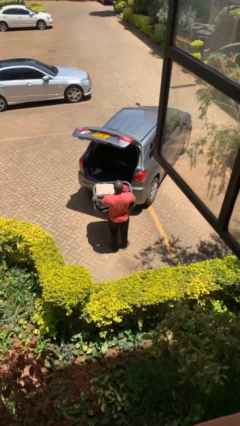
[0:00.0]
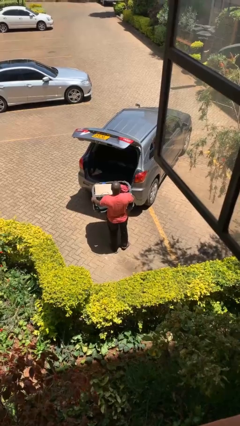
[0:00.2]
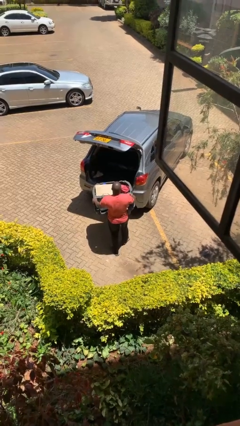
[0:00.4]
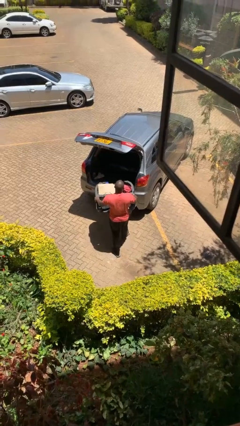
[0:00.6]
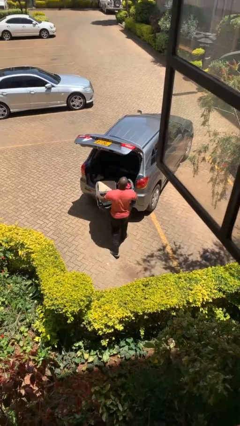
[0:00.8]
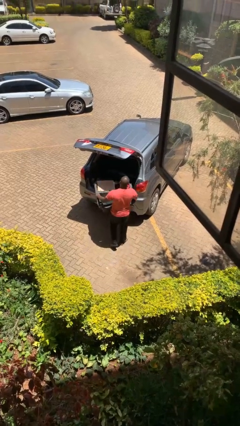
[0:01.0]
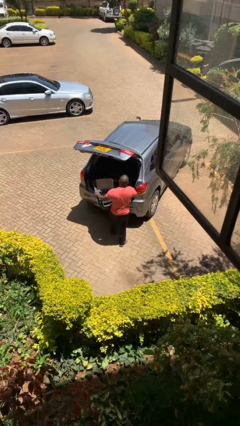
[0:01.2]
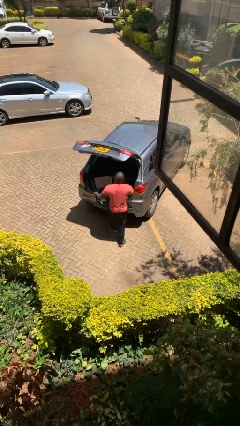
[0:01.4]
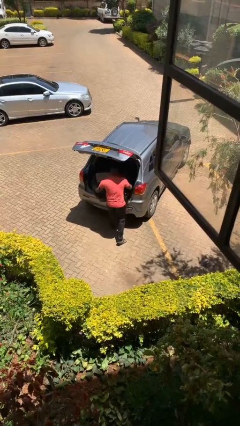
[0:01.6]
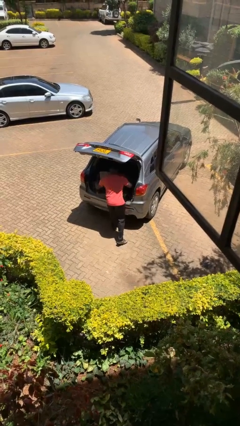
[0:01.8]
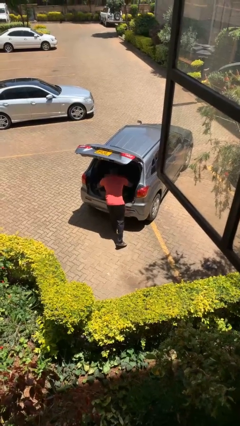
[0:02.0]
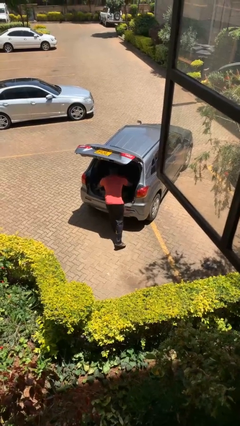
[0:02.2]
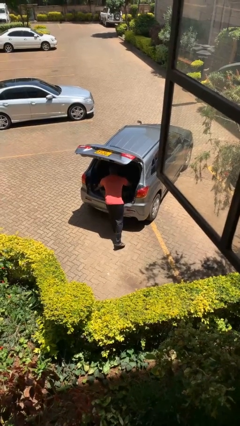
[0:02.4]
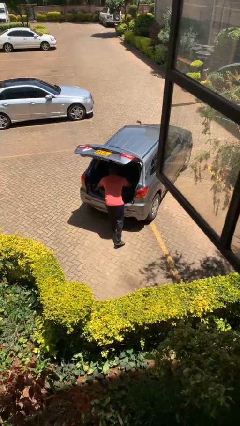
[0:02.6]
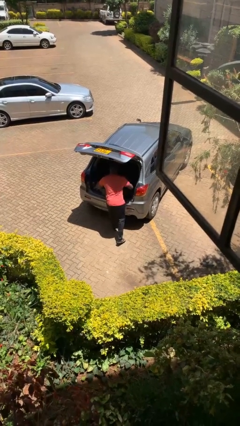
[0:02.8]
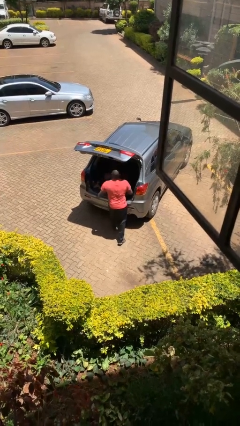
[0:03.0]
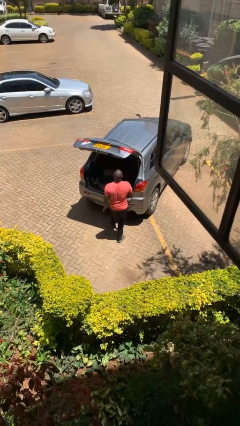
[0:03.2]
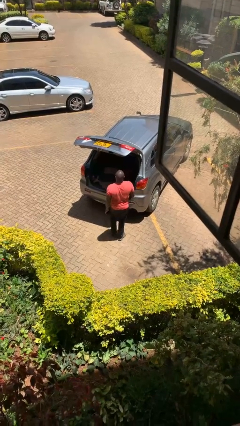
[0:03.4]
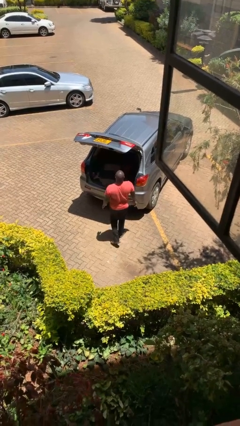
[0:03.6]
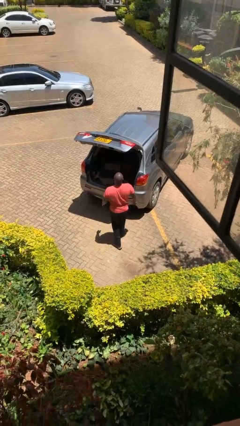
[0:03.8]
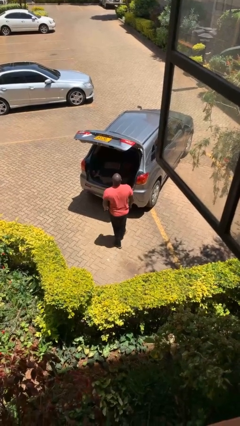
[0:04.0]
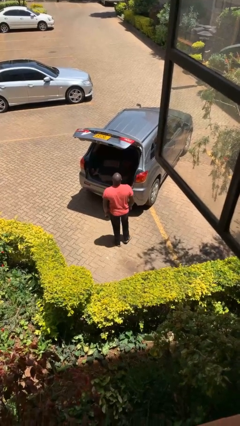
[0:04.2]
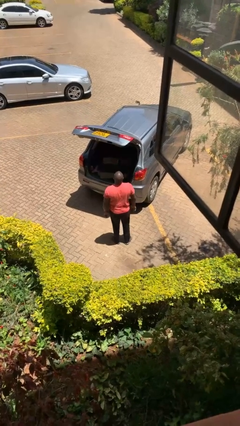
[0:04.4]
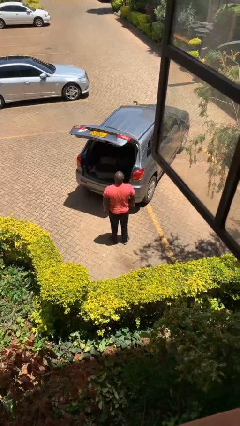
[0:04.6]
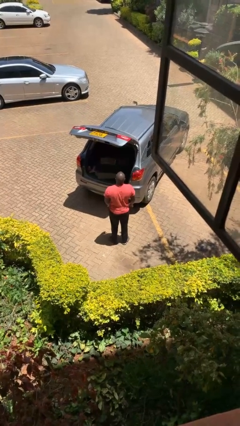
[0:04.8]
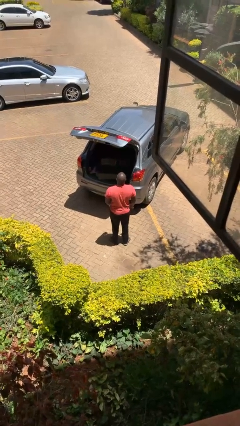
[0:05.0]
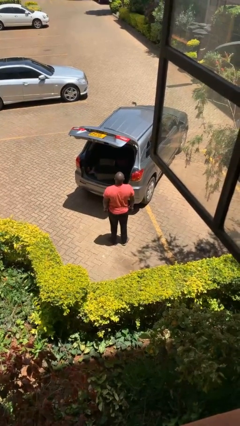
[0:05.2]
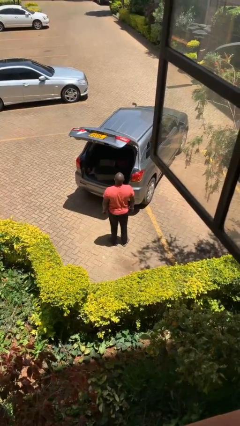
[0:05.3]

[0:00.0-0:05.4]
person loads car

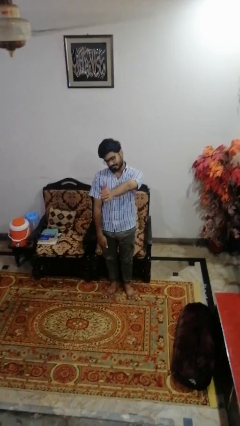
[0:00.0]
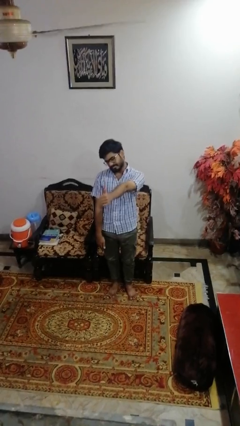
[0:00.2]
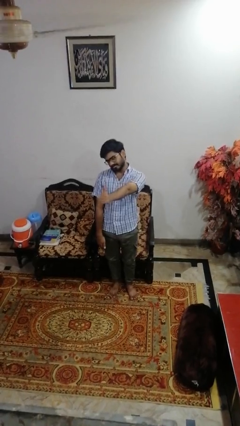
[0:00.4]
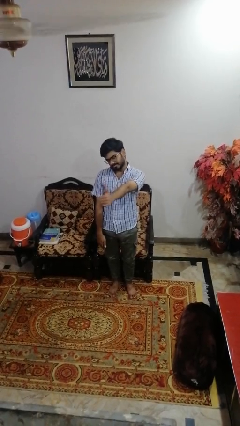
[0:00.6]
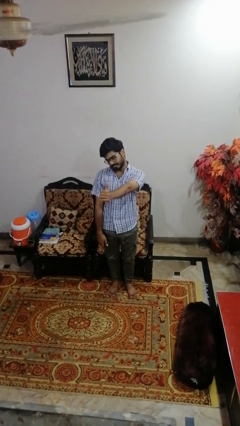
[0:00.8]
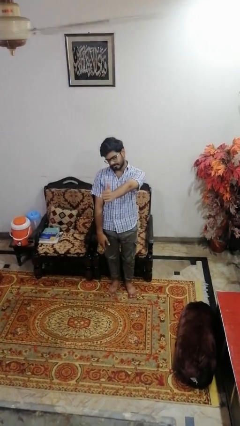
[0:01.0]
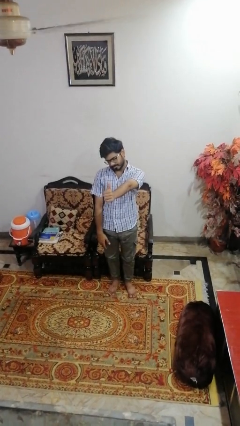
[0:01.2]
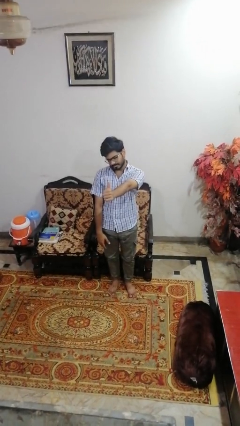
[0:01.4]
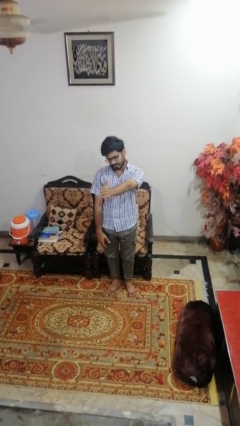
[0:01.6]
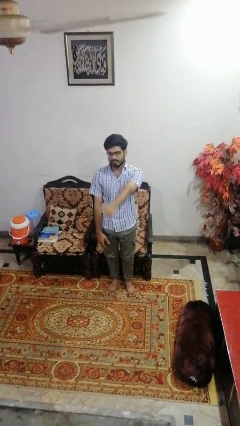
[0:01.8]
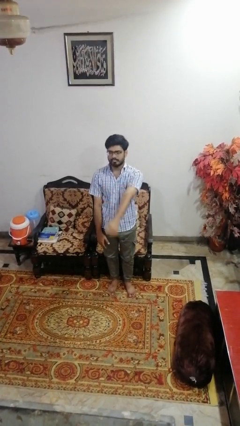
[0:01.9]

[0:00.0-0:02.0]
person gestures thumbs up

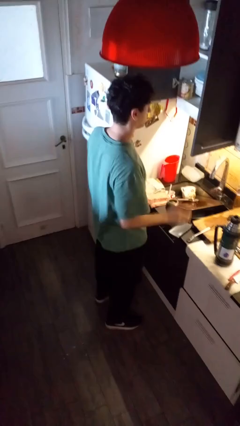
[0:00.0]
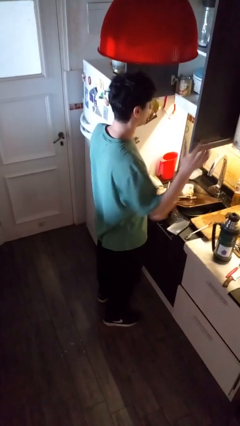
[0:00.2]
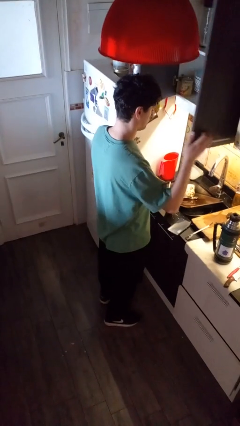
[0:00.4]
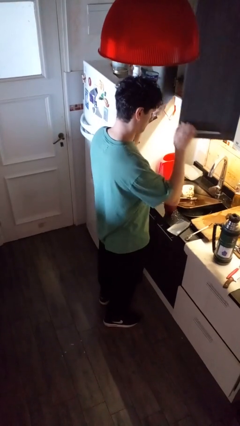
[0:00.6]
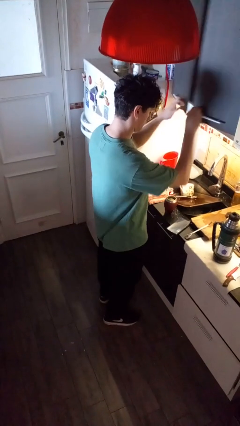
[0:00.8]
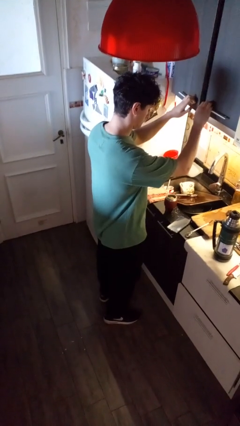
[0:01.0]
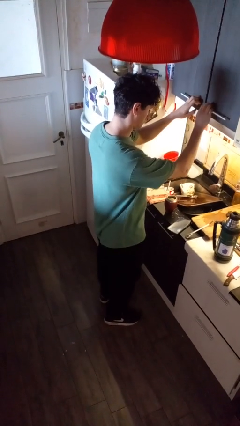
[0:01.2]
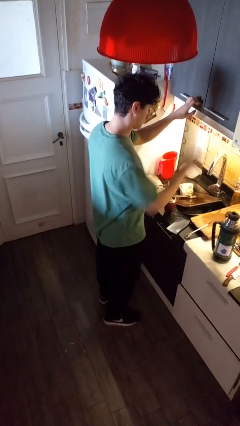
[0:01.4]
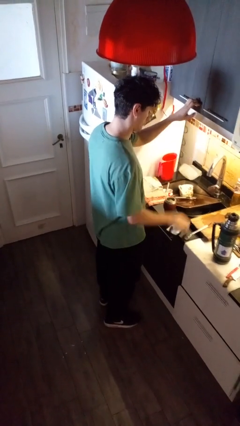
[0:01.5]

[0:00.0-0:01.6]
person closes kitchen drawer

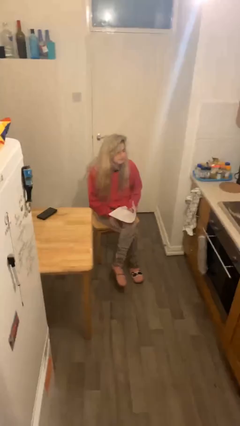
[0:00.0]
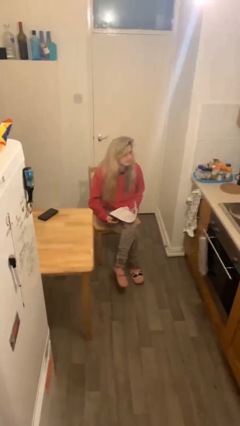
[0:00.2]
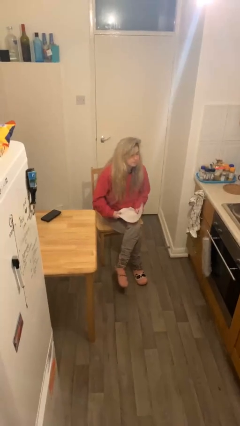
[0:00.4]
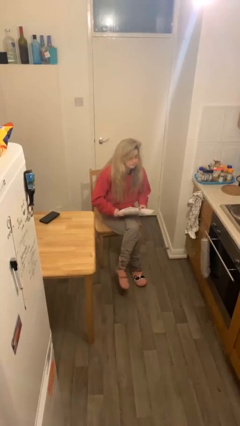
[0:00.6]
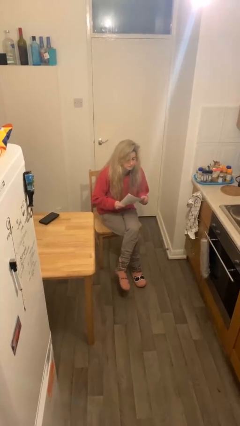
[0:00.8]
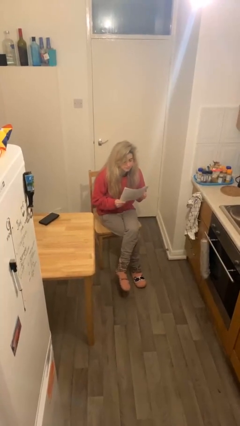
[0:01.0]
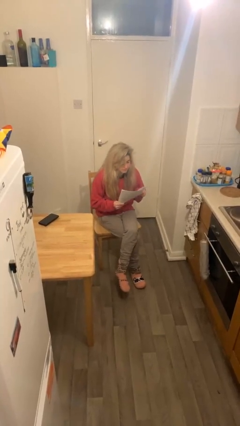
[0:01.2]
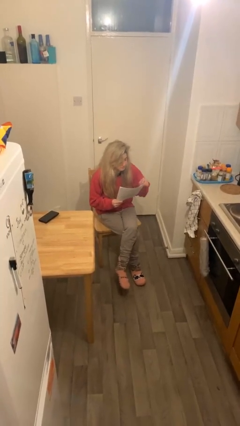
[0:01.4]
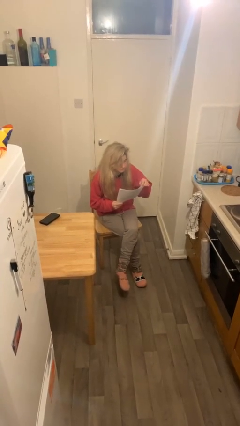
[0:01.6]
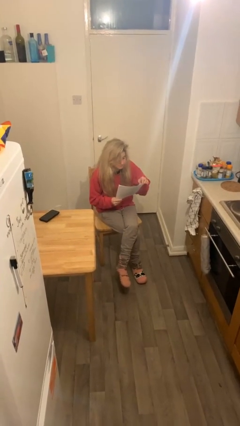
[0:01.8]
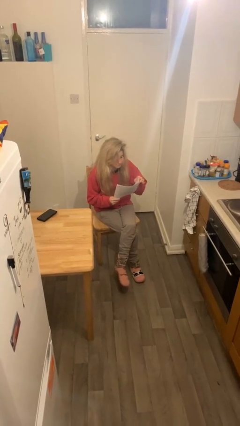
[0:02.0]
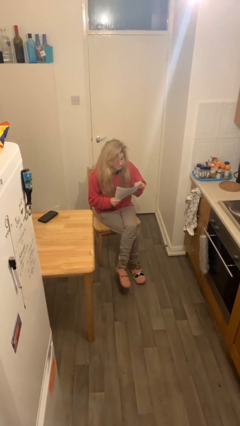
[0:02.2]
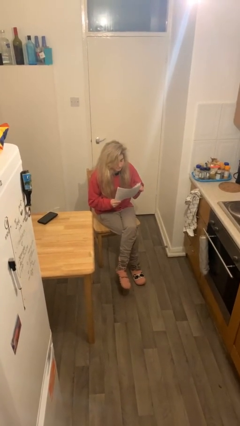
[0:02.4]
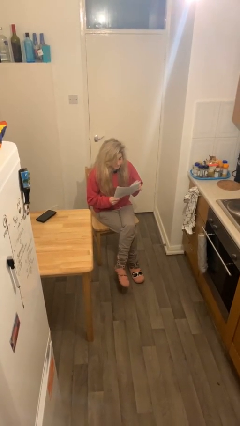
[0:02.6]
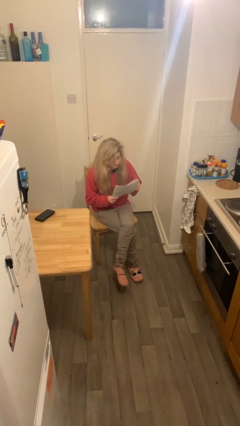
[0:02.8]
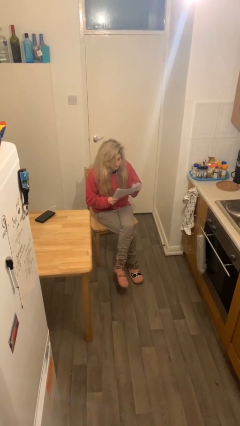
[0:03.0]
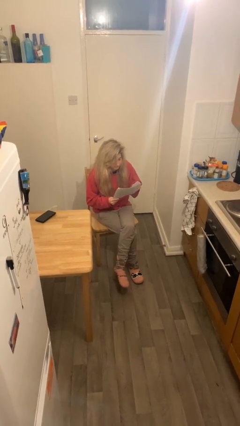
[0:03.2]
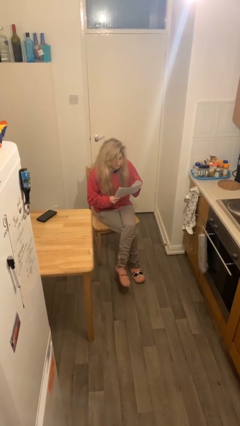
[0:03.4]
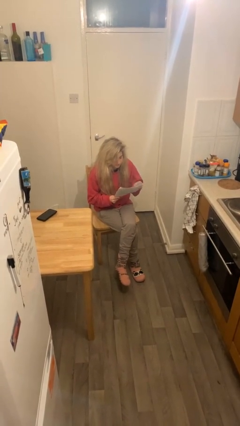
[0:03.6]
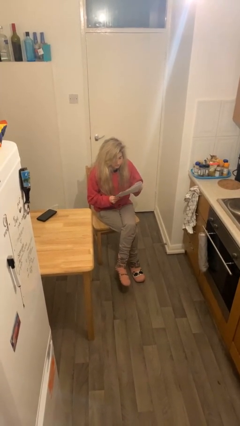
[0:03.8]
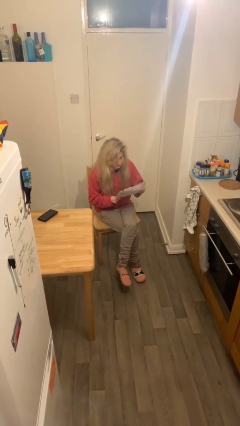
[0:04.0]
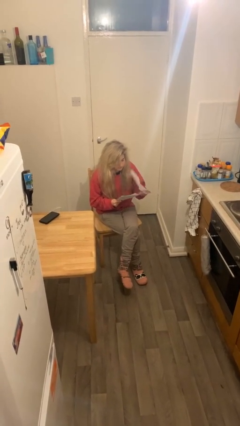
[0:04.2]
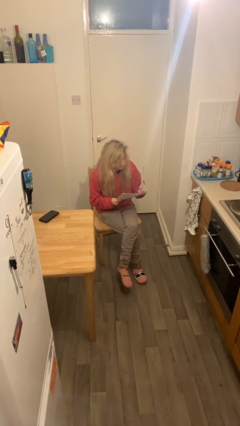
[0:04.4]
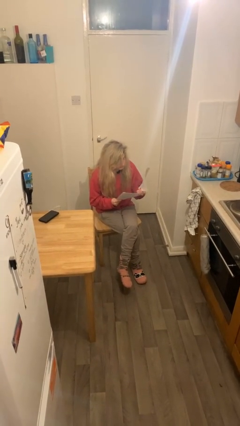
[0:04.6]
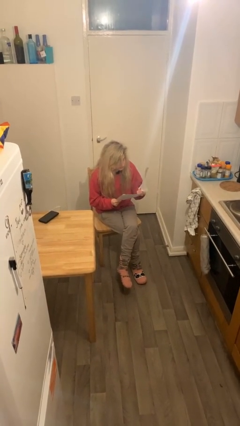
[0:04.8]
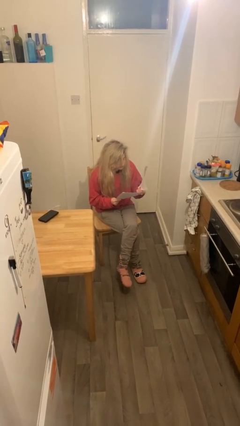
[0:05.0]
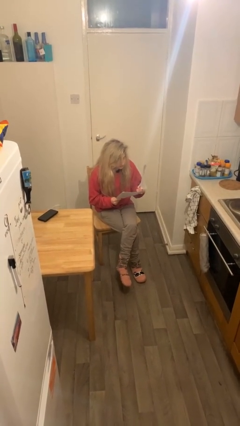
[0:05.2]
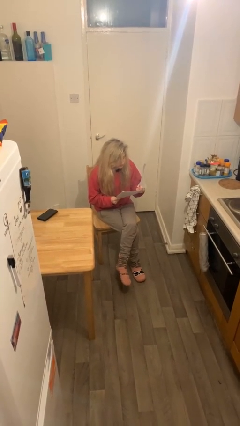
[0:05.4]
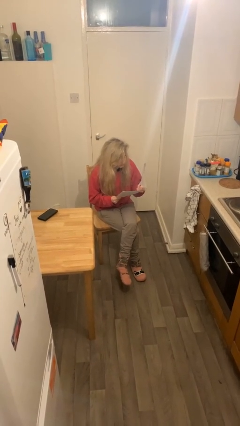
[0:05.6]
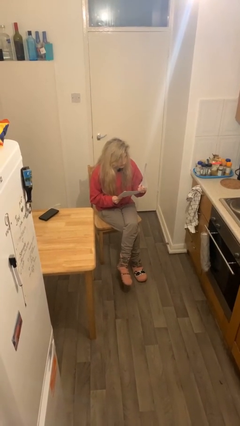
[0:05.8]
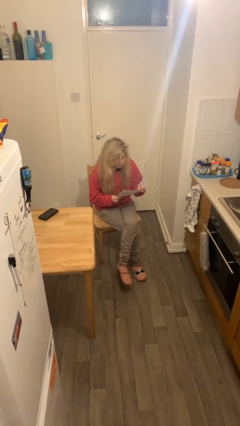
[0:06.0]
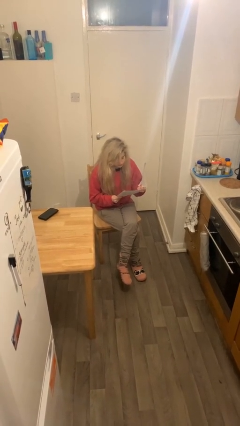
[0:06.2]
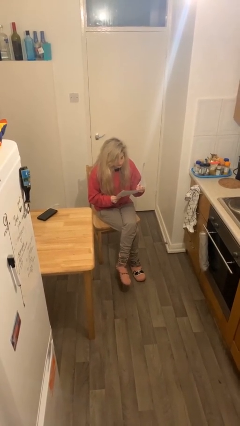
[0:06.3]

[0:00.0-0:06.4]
person reads document

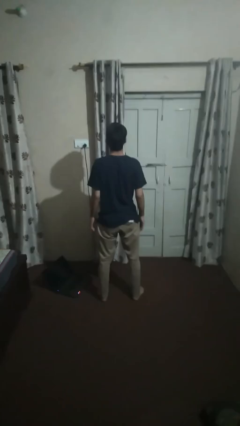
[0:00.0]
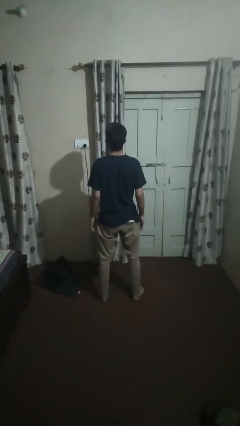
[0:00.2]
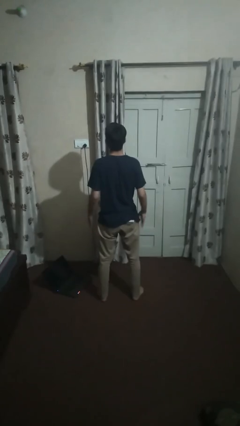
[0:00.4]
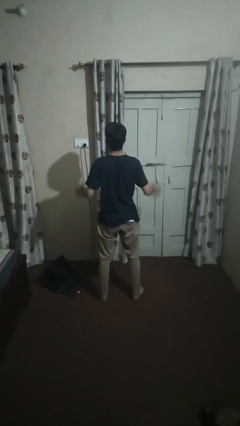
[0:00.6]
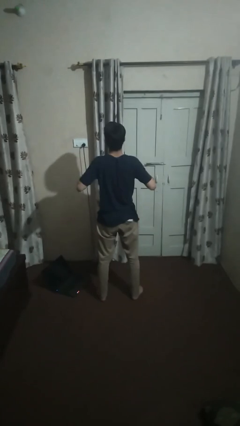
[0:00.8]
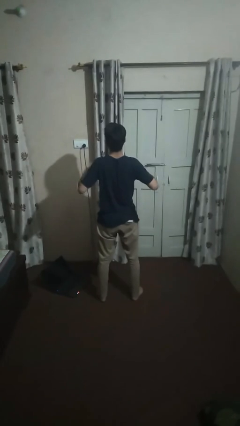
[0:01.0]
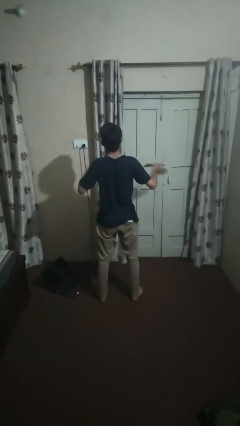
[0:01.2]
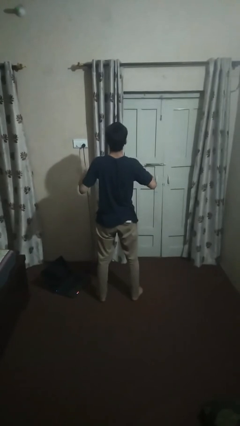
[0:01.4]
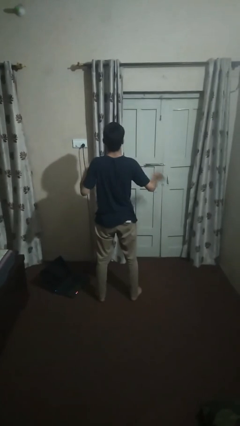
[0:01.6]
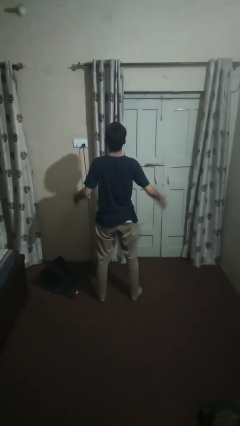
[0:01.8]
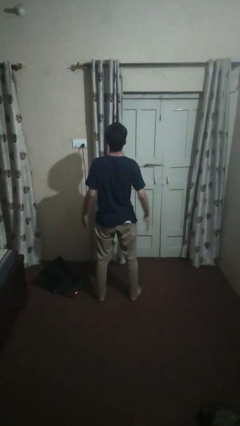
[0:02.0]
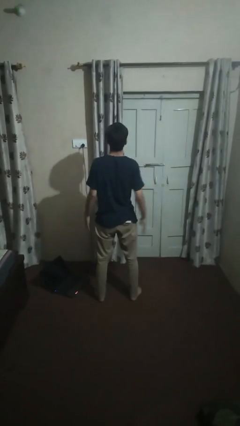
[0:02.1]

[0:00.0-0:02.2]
person drums on chest
